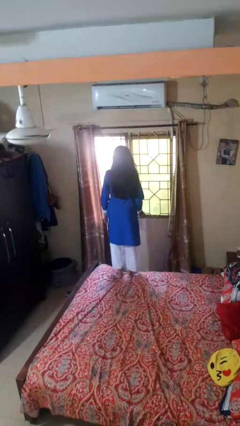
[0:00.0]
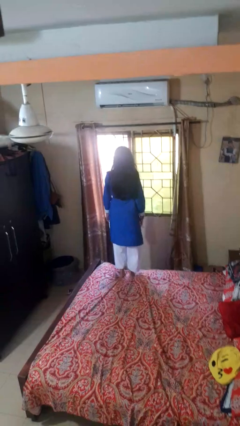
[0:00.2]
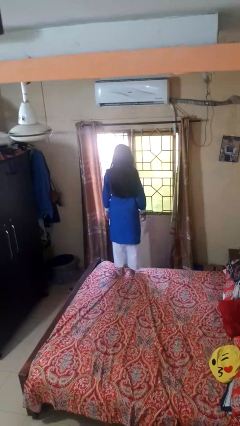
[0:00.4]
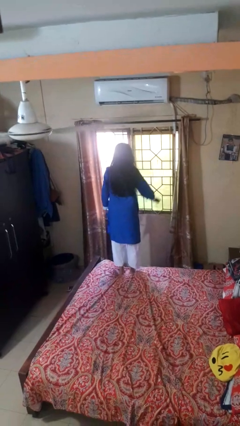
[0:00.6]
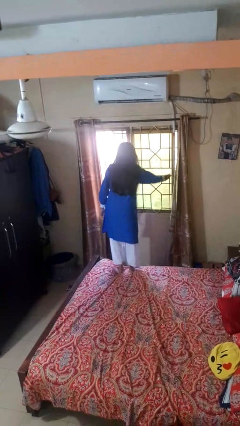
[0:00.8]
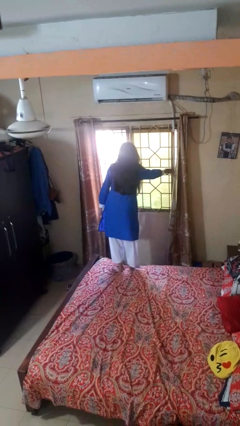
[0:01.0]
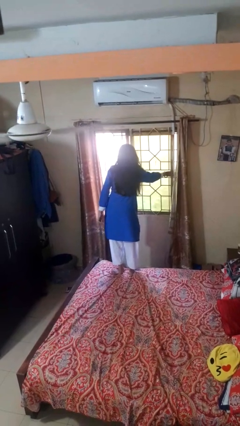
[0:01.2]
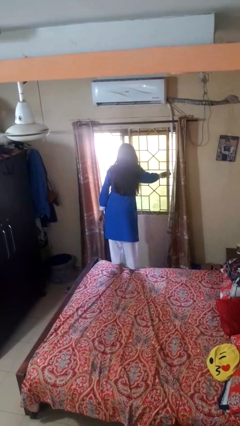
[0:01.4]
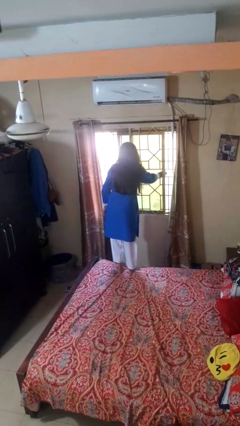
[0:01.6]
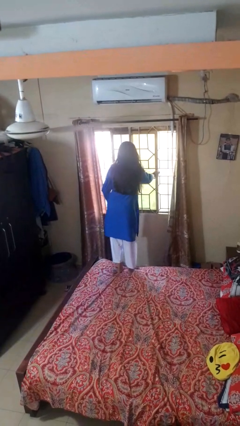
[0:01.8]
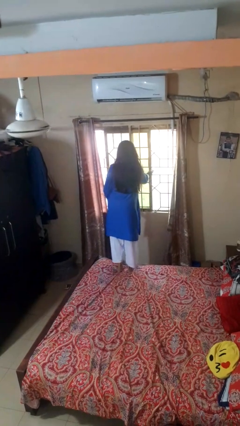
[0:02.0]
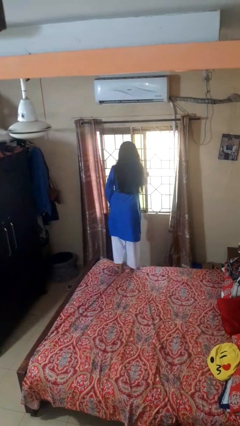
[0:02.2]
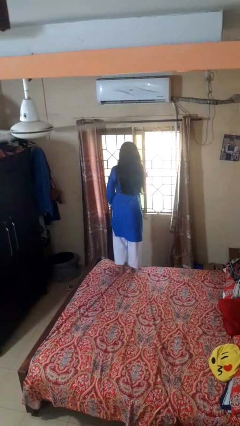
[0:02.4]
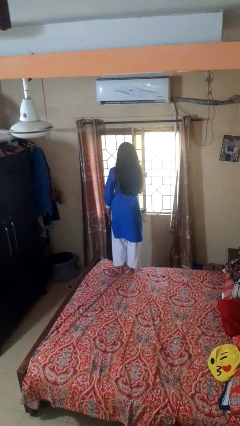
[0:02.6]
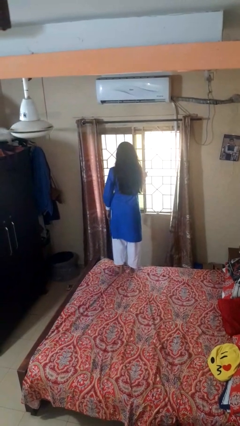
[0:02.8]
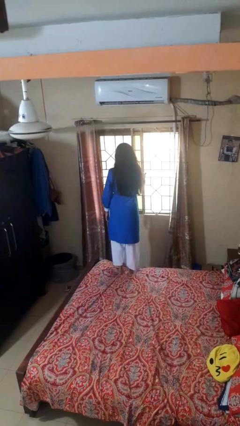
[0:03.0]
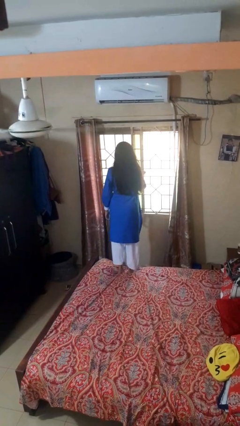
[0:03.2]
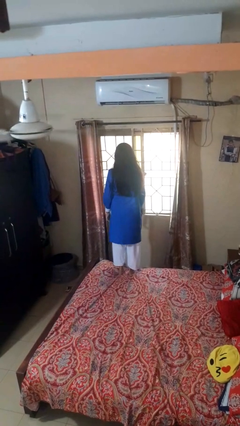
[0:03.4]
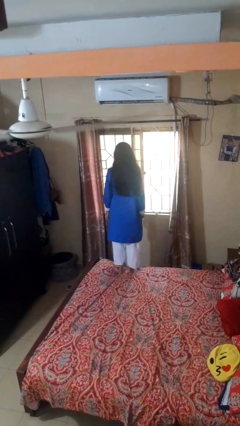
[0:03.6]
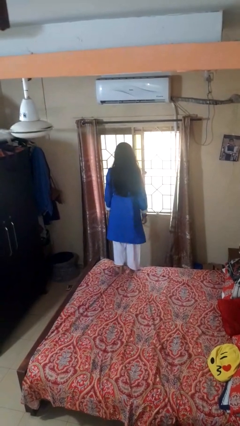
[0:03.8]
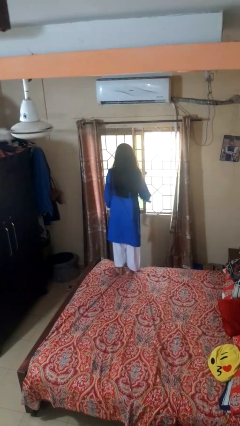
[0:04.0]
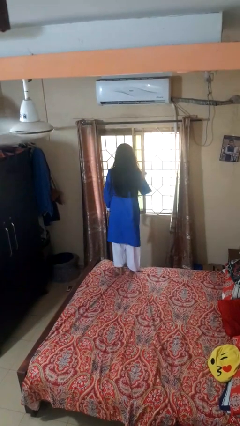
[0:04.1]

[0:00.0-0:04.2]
person closes home window

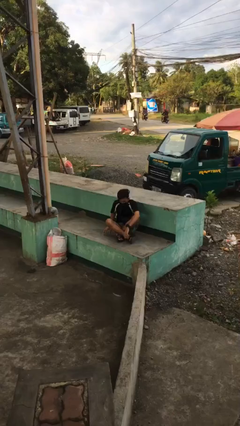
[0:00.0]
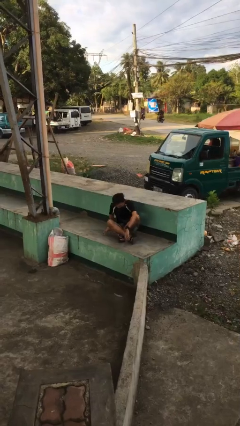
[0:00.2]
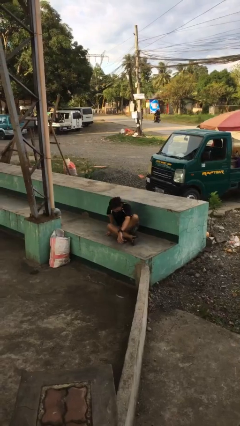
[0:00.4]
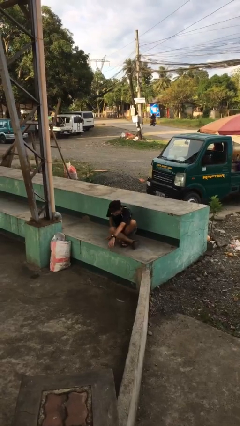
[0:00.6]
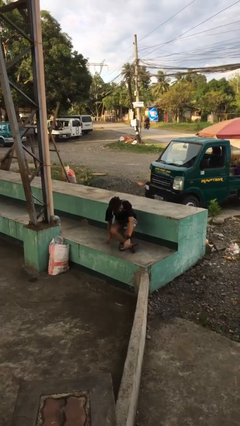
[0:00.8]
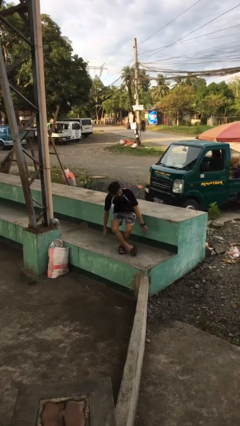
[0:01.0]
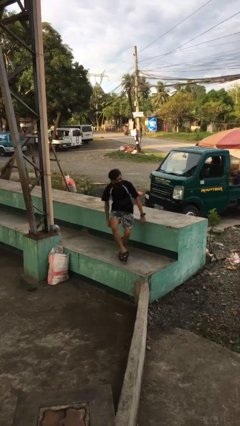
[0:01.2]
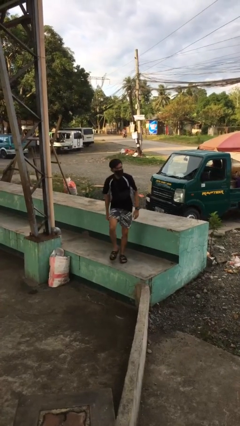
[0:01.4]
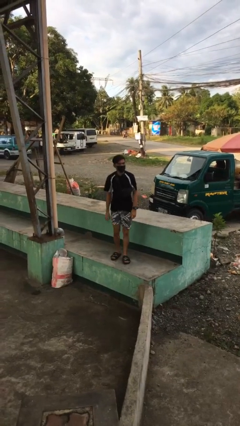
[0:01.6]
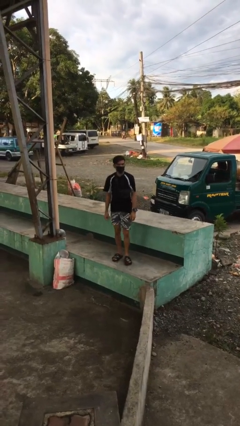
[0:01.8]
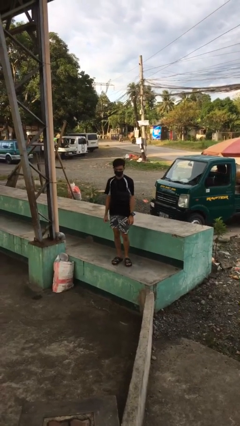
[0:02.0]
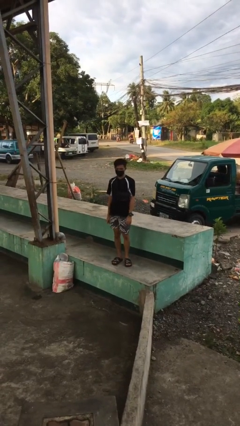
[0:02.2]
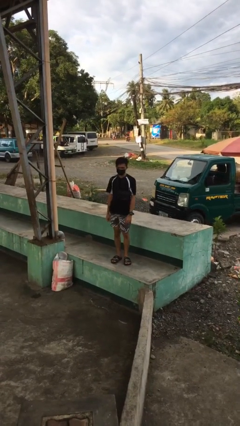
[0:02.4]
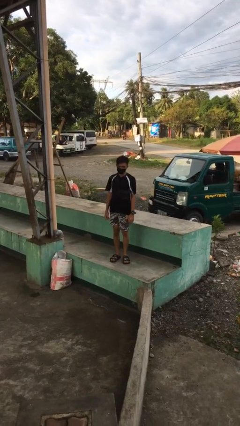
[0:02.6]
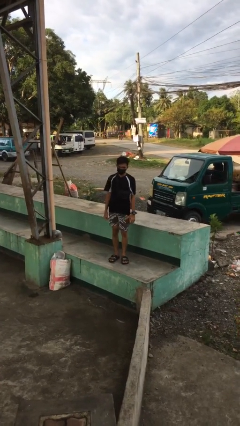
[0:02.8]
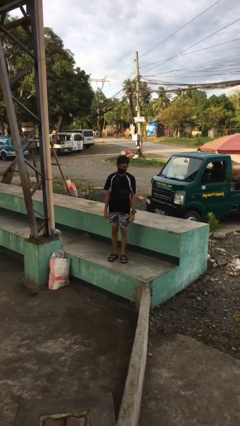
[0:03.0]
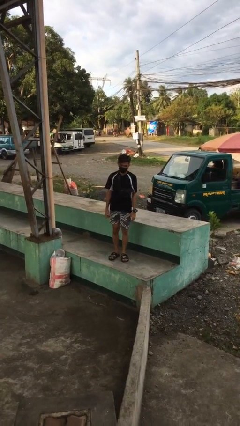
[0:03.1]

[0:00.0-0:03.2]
person stands up from floor

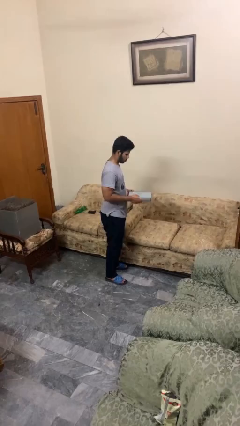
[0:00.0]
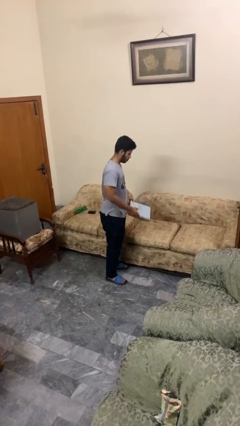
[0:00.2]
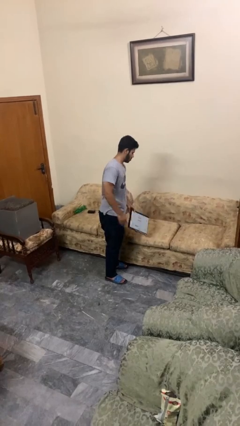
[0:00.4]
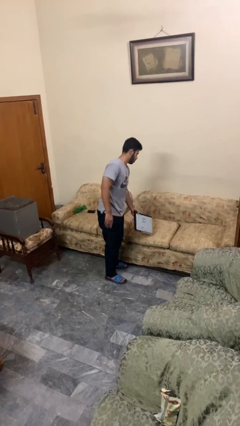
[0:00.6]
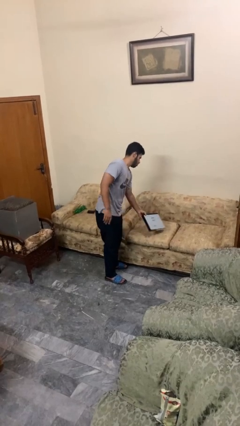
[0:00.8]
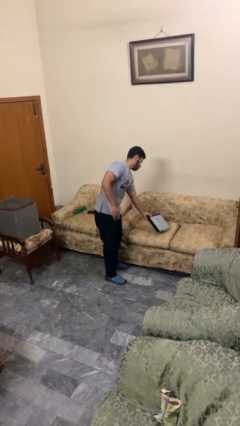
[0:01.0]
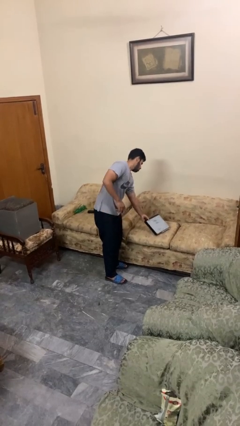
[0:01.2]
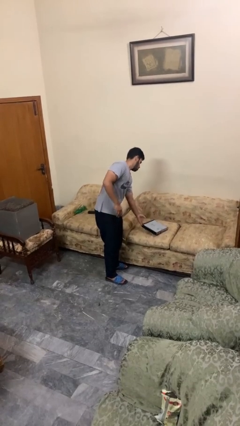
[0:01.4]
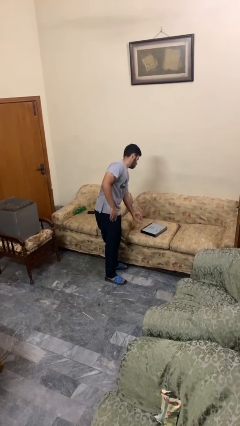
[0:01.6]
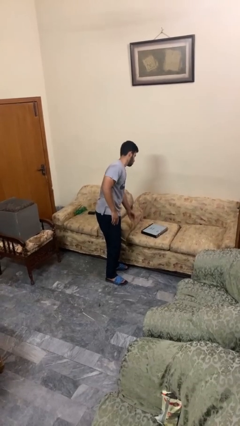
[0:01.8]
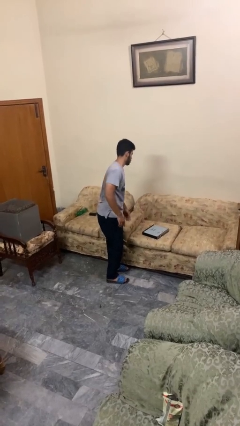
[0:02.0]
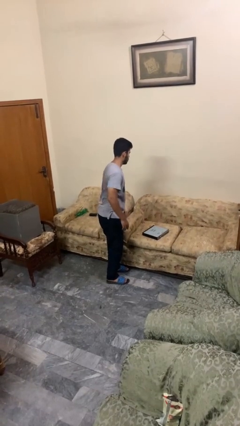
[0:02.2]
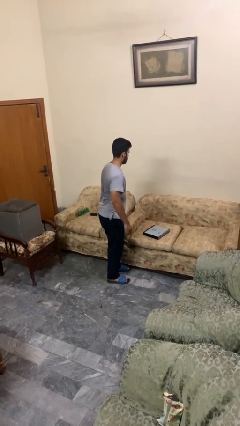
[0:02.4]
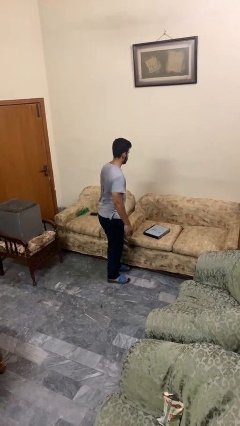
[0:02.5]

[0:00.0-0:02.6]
person puts down object on couch

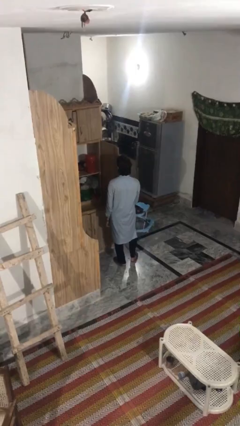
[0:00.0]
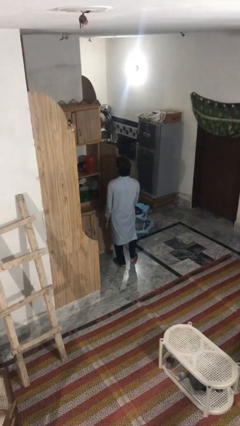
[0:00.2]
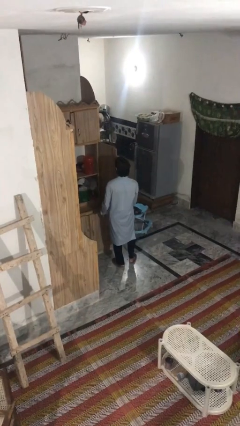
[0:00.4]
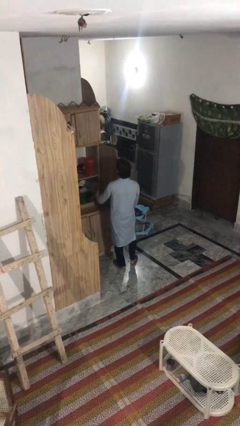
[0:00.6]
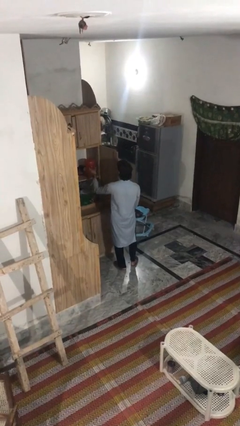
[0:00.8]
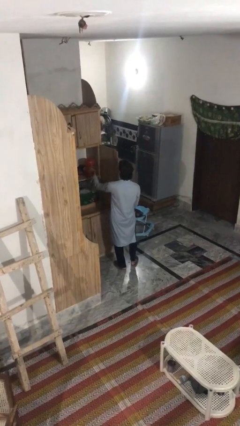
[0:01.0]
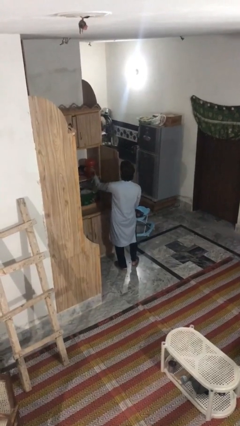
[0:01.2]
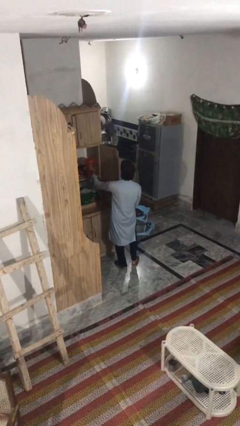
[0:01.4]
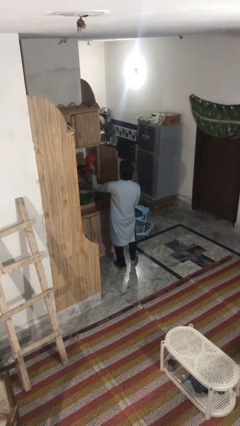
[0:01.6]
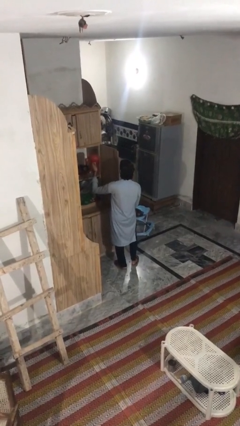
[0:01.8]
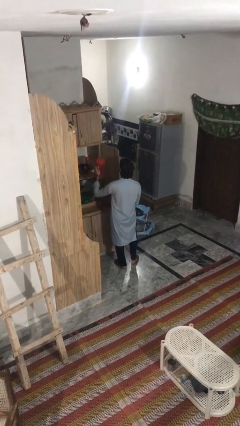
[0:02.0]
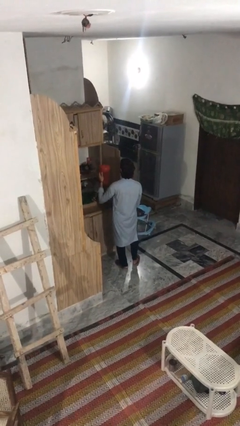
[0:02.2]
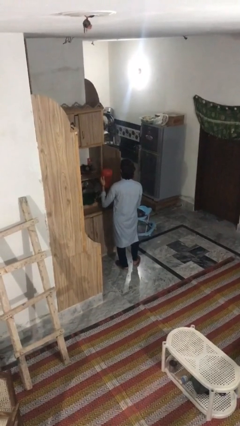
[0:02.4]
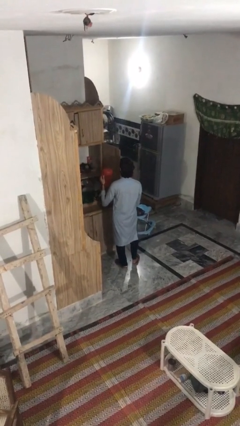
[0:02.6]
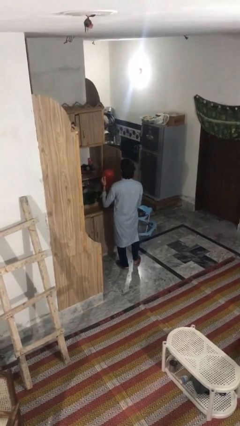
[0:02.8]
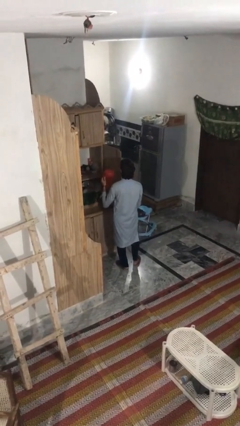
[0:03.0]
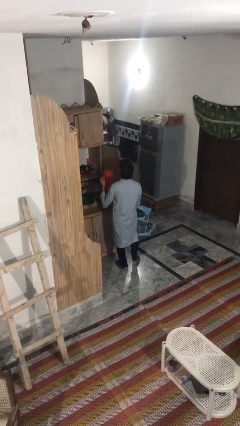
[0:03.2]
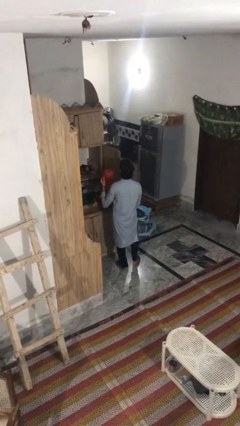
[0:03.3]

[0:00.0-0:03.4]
person picks up object from cabinet

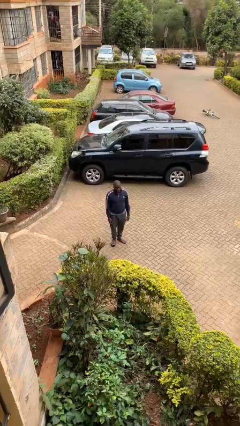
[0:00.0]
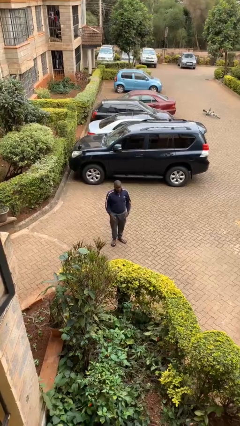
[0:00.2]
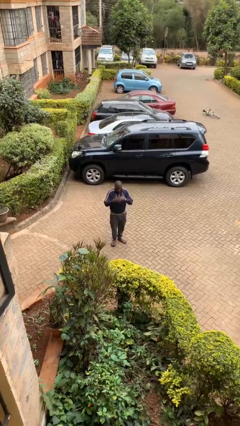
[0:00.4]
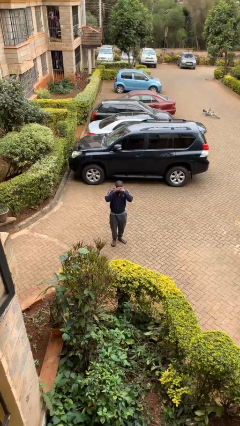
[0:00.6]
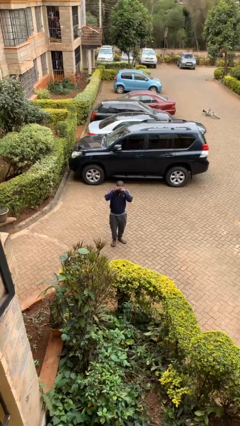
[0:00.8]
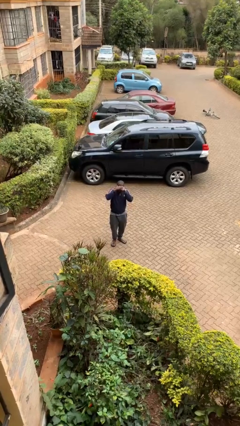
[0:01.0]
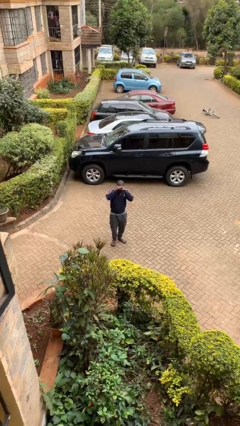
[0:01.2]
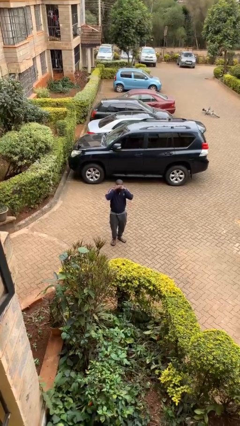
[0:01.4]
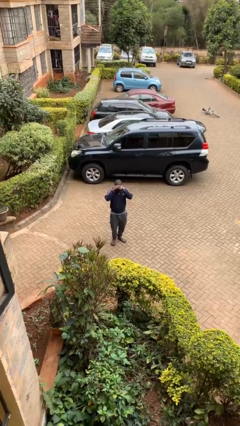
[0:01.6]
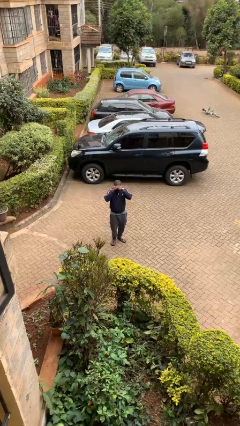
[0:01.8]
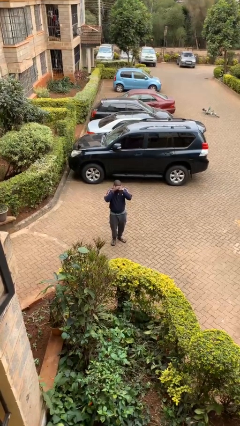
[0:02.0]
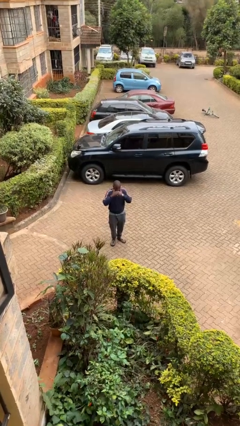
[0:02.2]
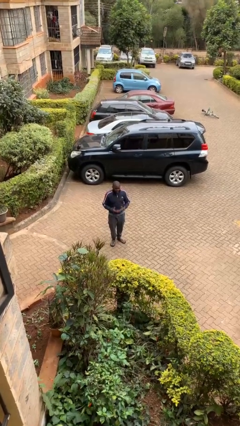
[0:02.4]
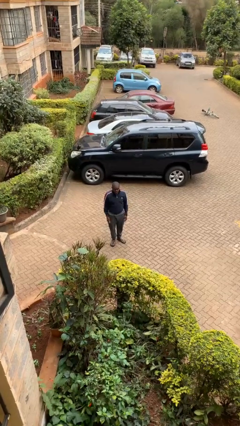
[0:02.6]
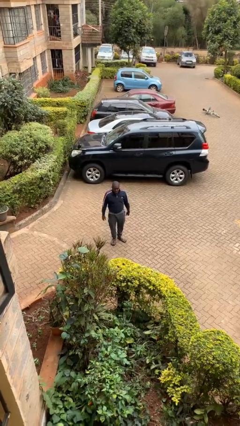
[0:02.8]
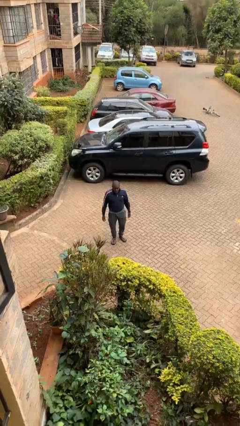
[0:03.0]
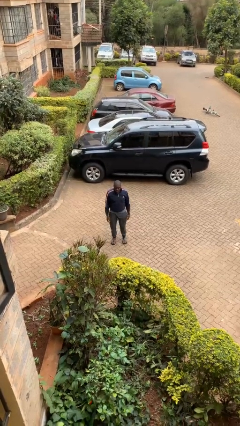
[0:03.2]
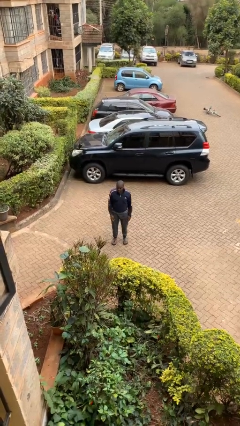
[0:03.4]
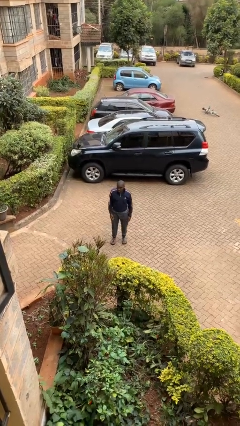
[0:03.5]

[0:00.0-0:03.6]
person shades eyes
